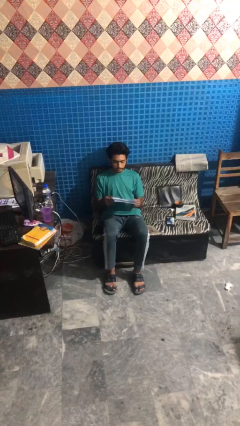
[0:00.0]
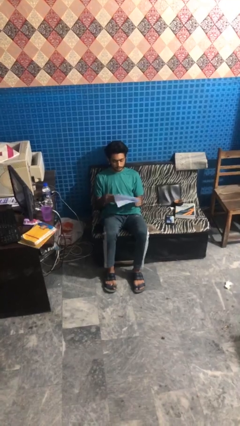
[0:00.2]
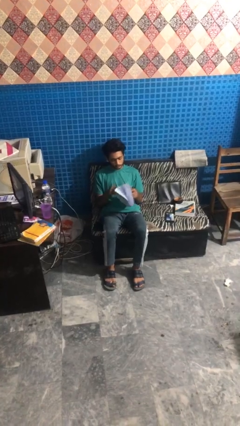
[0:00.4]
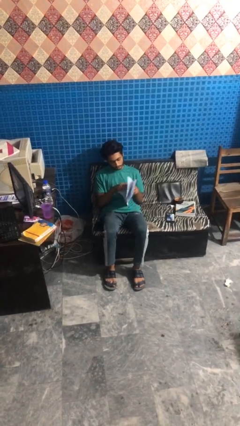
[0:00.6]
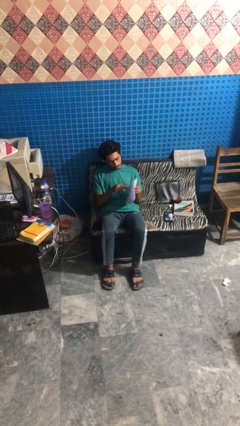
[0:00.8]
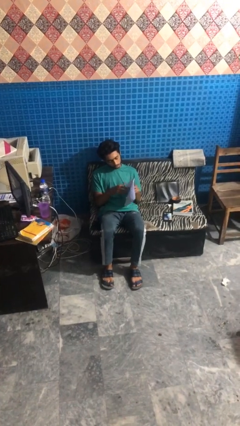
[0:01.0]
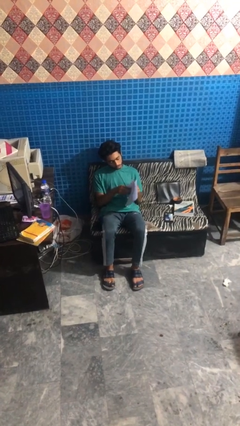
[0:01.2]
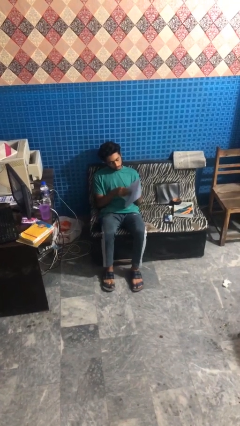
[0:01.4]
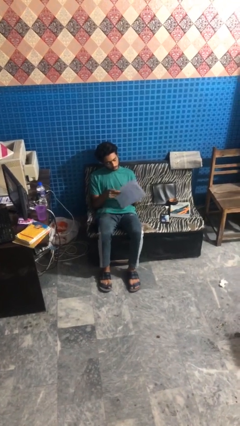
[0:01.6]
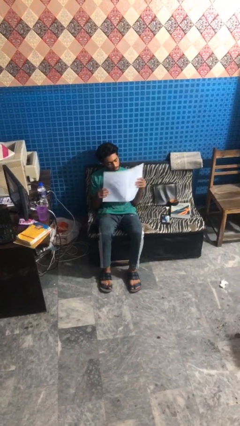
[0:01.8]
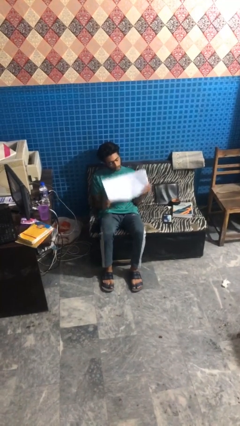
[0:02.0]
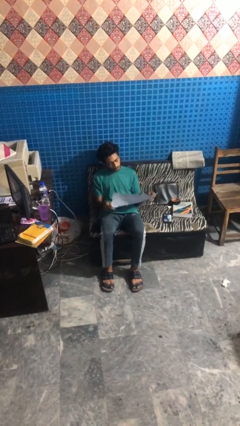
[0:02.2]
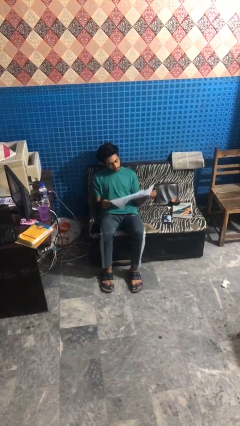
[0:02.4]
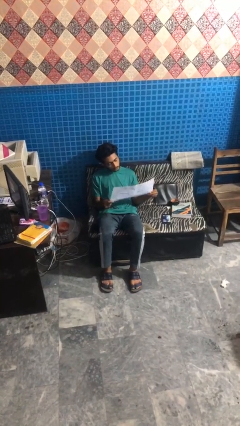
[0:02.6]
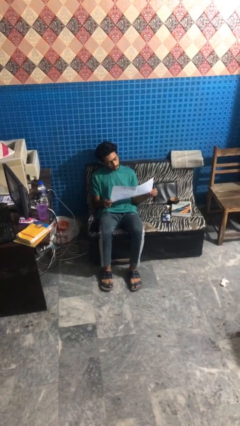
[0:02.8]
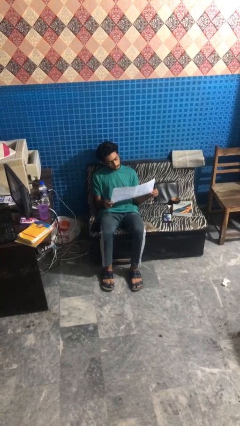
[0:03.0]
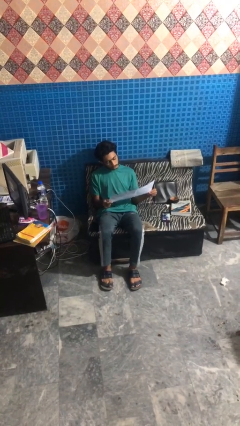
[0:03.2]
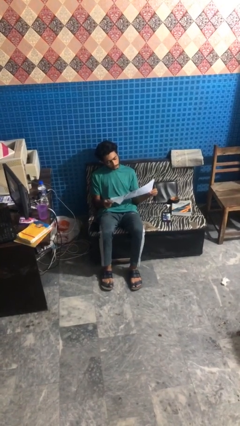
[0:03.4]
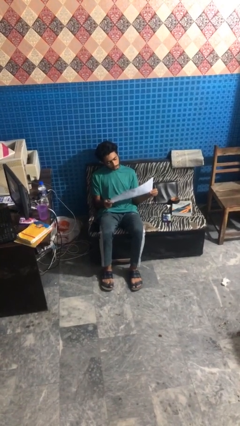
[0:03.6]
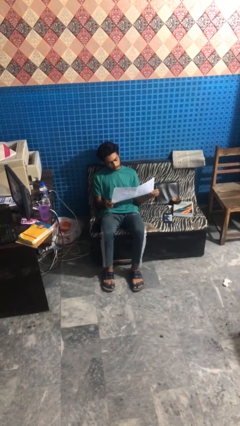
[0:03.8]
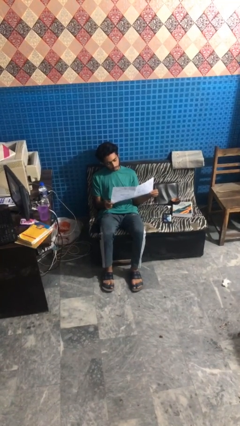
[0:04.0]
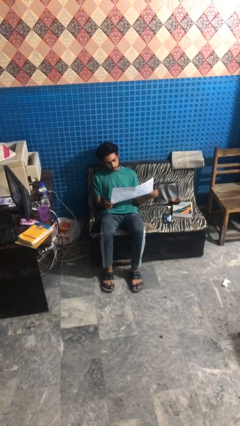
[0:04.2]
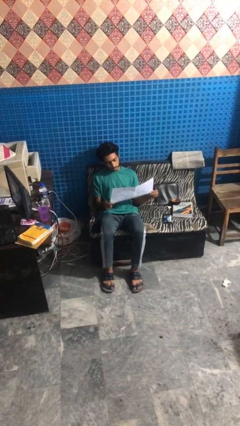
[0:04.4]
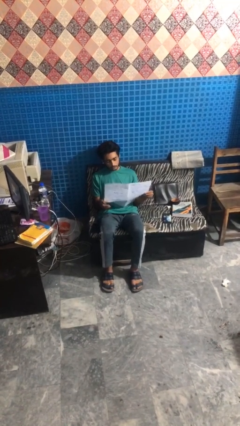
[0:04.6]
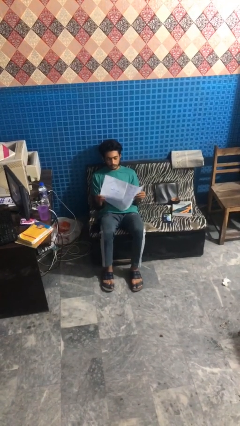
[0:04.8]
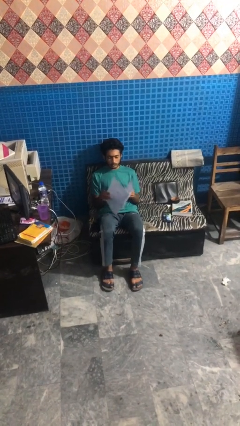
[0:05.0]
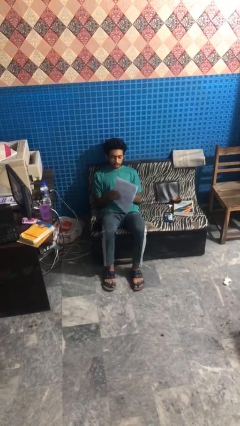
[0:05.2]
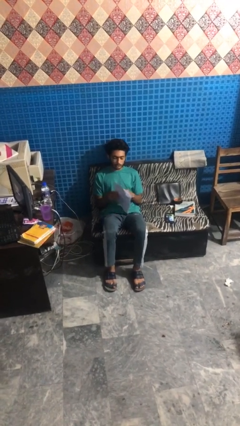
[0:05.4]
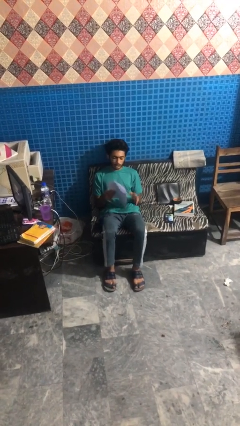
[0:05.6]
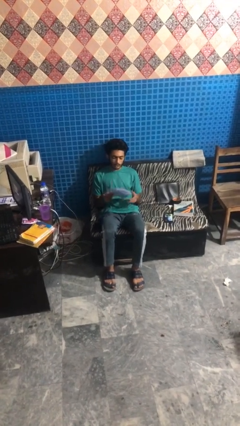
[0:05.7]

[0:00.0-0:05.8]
person reads newspaper

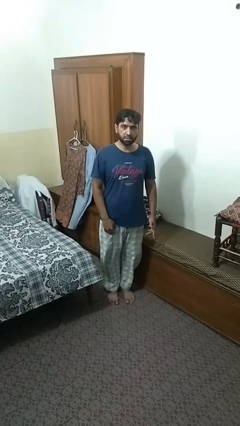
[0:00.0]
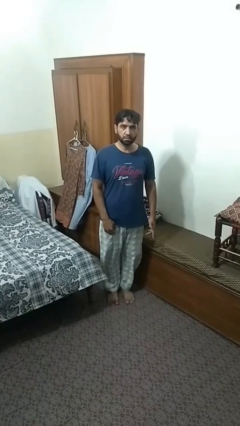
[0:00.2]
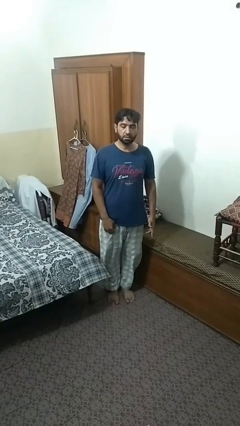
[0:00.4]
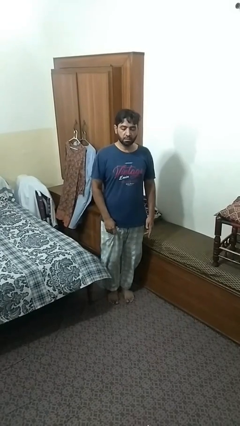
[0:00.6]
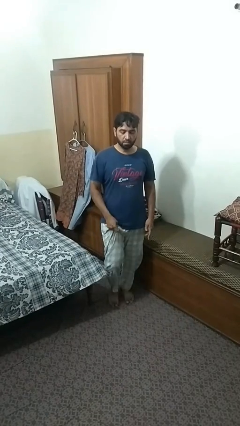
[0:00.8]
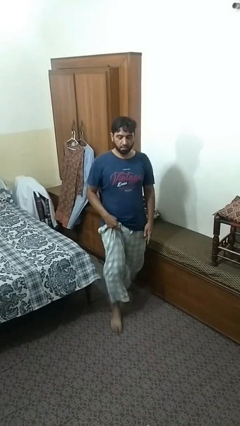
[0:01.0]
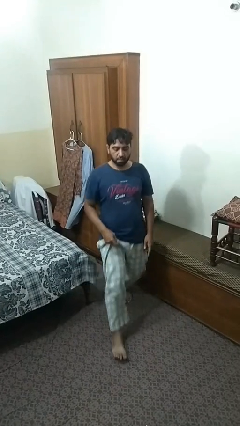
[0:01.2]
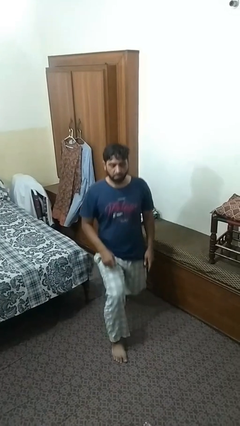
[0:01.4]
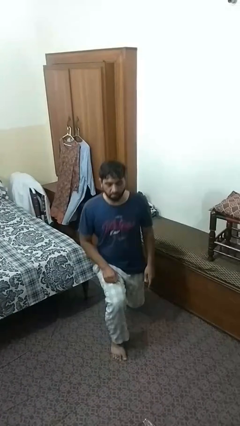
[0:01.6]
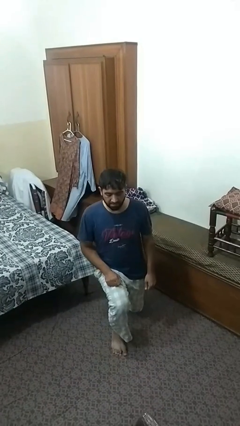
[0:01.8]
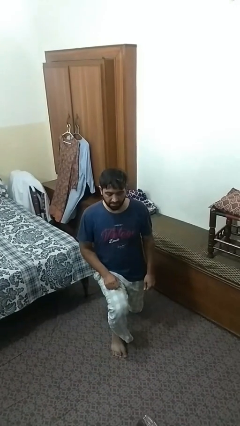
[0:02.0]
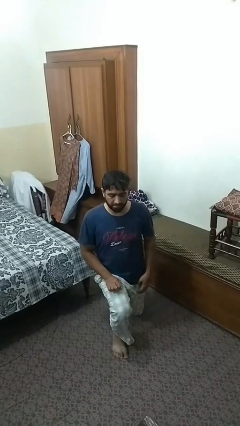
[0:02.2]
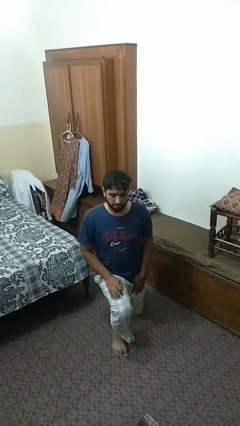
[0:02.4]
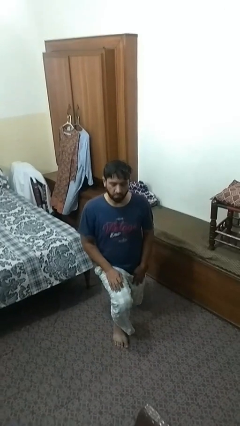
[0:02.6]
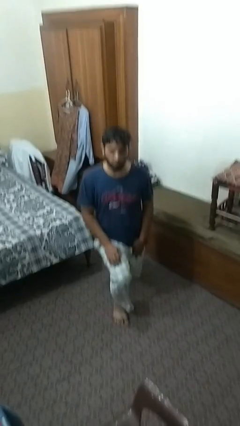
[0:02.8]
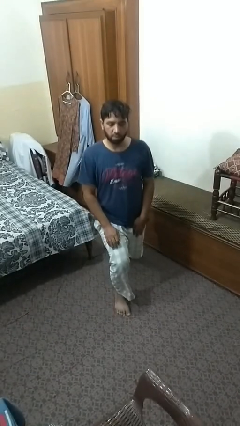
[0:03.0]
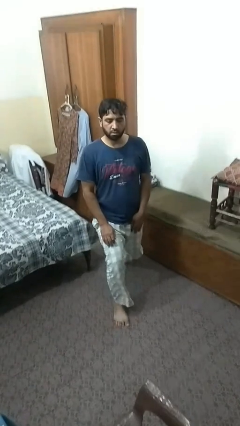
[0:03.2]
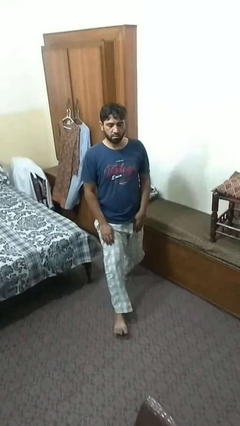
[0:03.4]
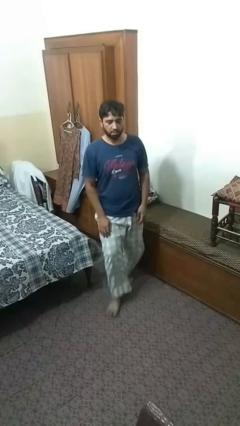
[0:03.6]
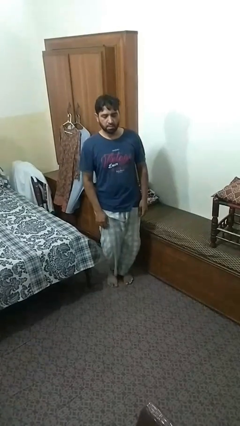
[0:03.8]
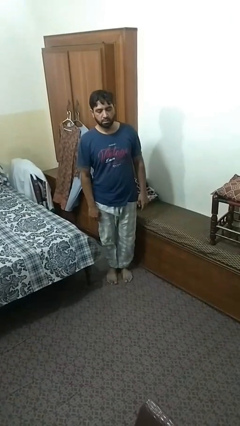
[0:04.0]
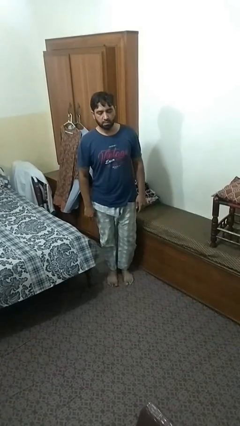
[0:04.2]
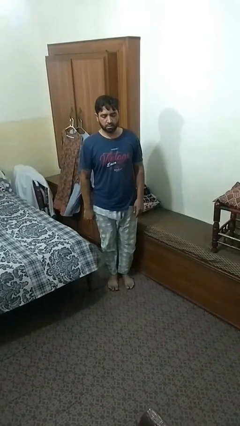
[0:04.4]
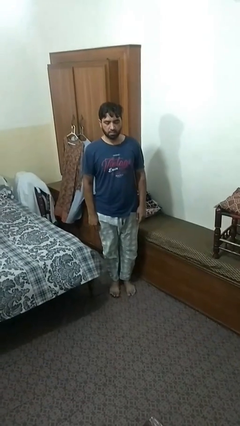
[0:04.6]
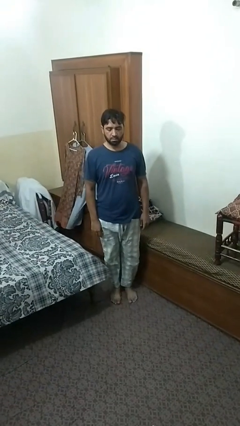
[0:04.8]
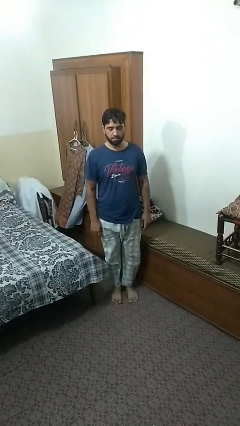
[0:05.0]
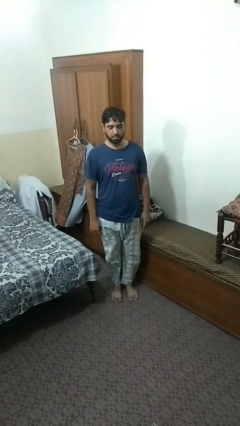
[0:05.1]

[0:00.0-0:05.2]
person exercises with lunges

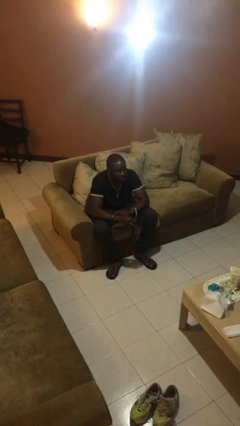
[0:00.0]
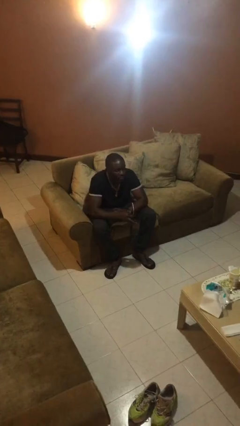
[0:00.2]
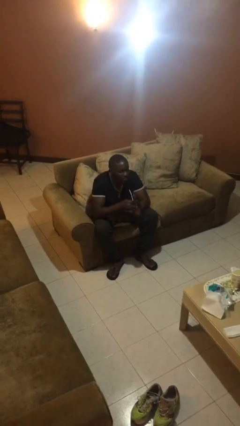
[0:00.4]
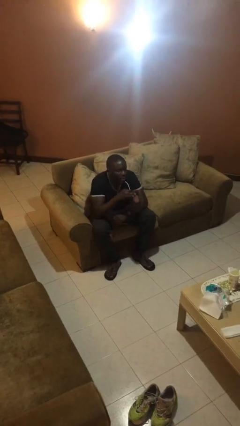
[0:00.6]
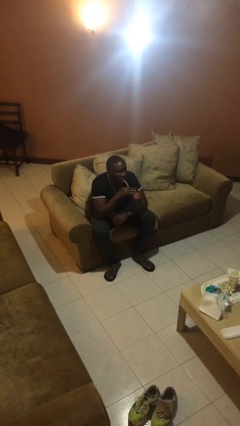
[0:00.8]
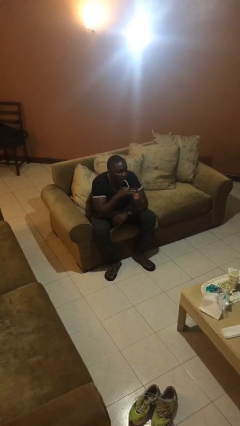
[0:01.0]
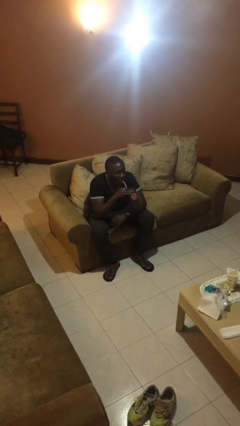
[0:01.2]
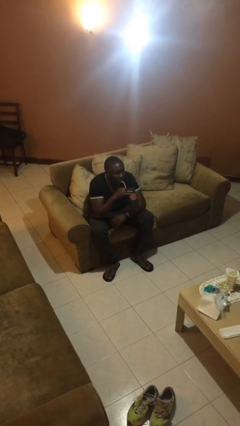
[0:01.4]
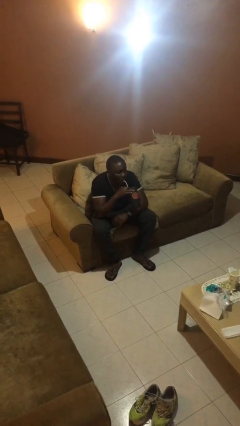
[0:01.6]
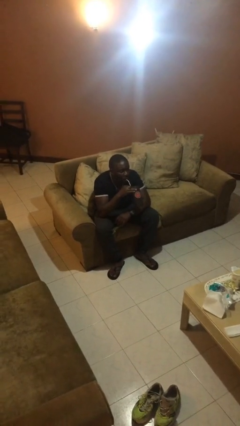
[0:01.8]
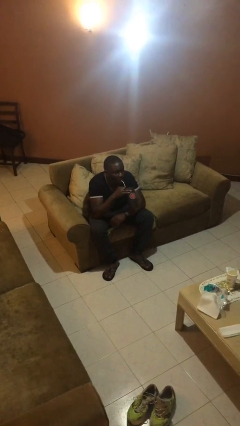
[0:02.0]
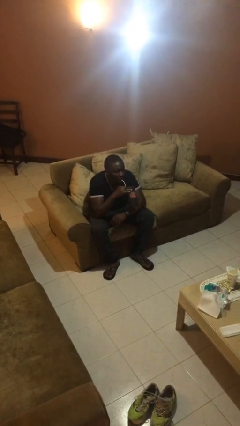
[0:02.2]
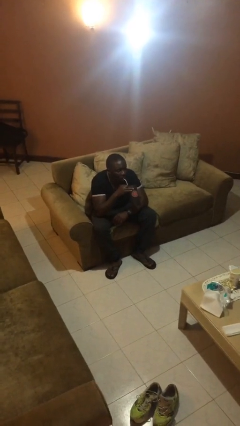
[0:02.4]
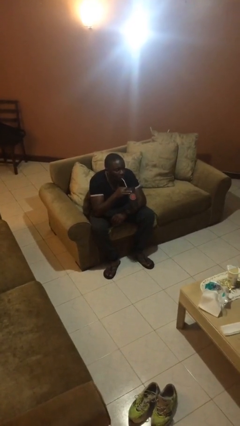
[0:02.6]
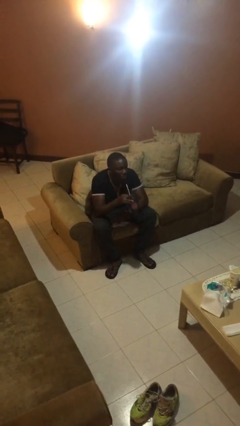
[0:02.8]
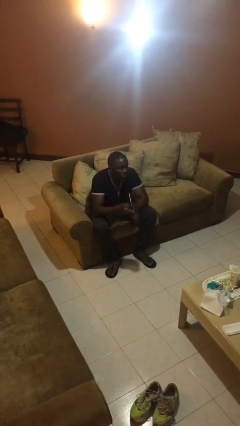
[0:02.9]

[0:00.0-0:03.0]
person drinks from straw

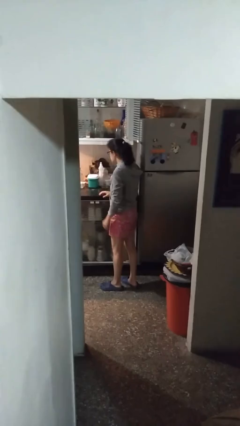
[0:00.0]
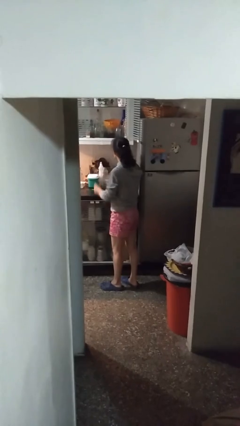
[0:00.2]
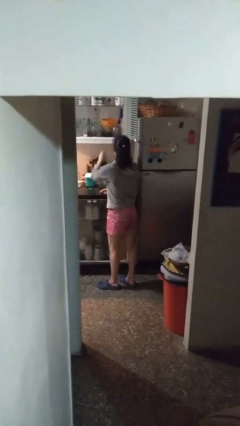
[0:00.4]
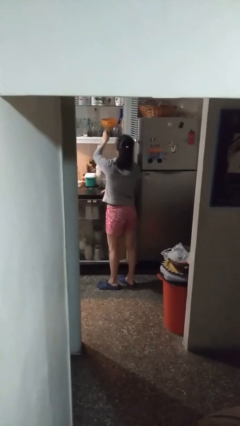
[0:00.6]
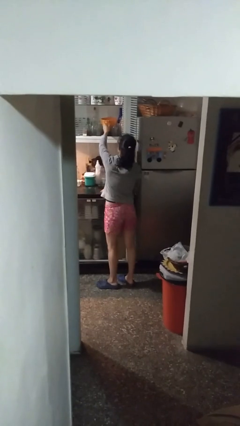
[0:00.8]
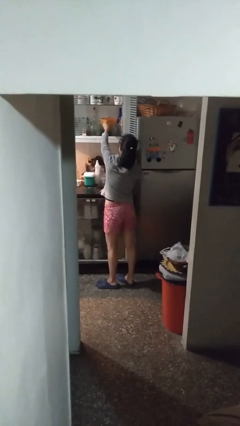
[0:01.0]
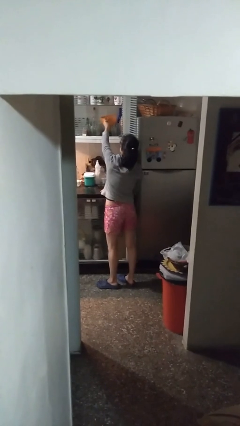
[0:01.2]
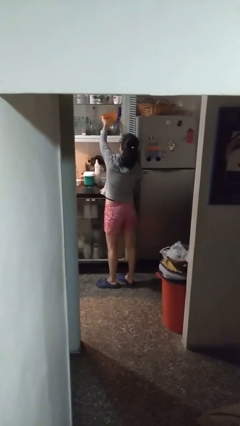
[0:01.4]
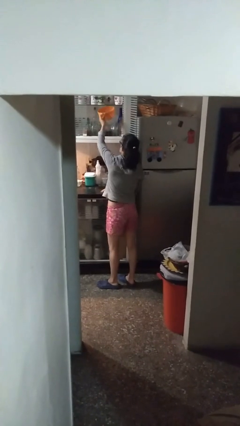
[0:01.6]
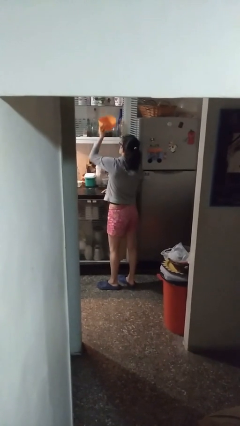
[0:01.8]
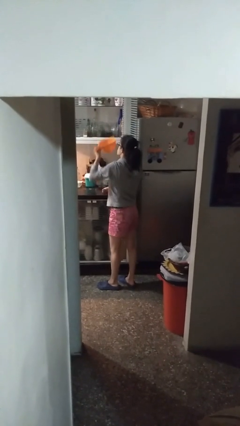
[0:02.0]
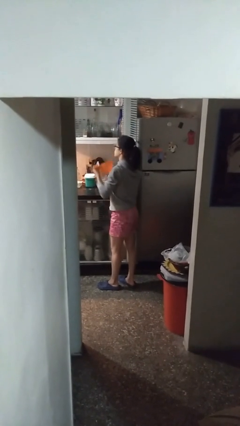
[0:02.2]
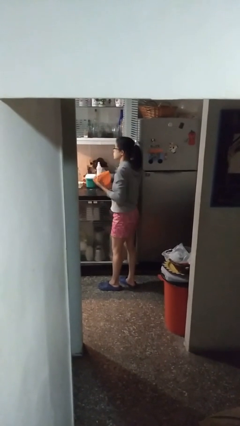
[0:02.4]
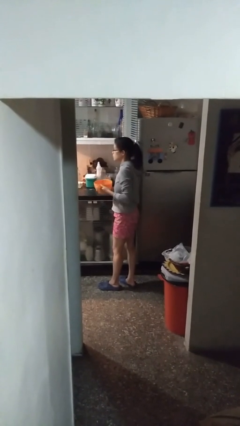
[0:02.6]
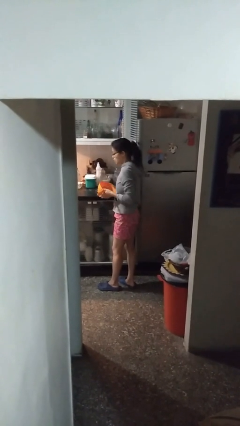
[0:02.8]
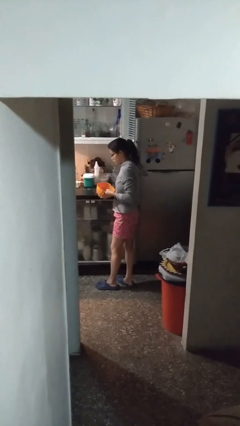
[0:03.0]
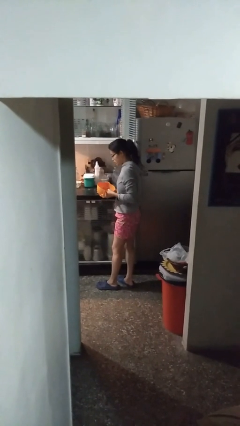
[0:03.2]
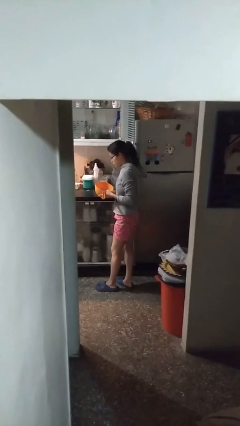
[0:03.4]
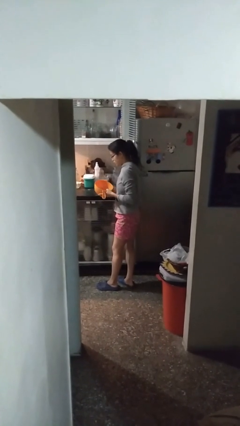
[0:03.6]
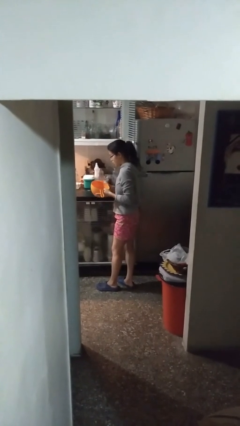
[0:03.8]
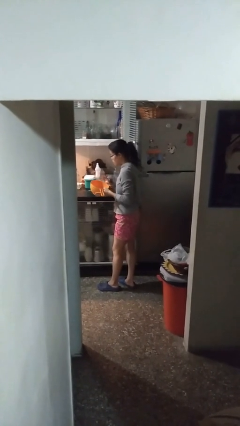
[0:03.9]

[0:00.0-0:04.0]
person picks up object from cabinet
